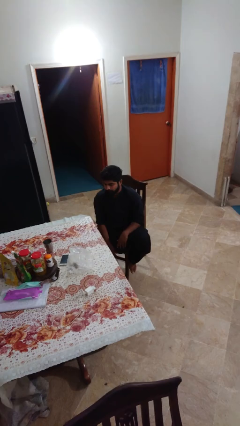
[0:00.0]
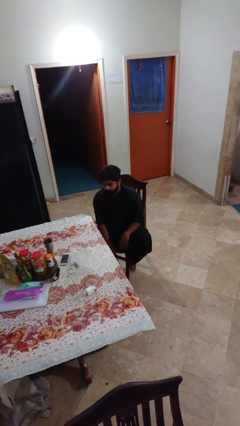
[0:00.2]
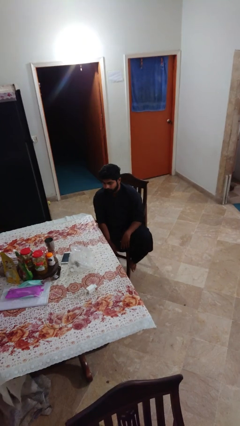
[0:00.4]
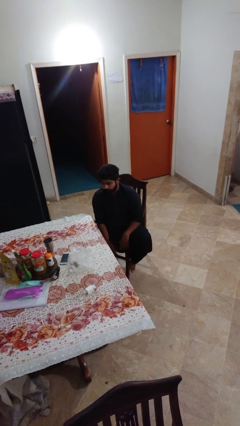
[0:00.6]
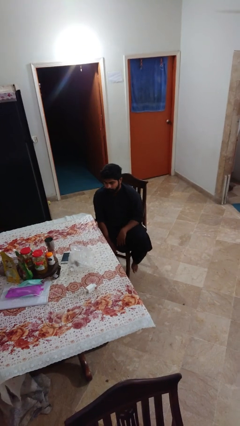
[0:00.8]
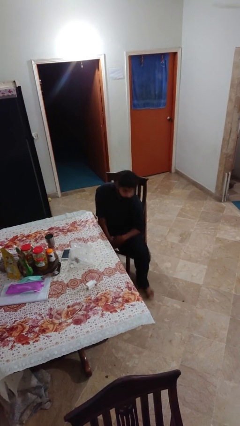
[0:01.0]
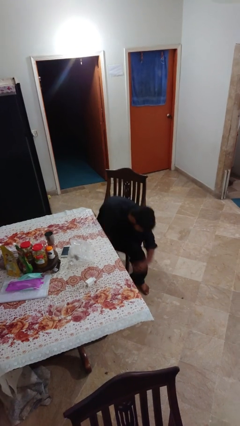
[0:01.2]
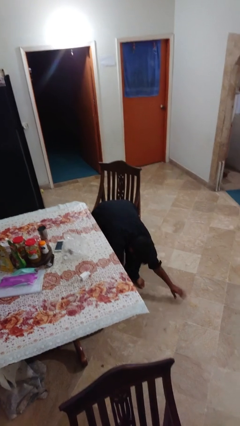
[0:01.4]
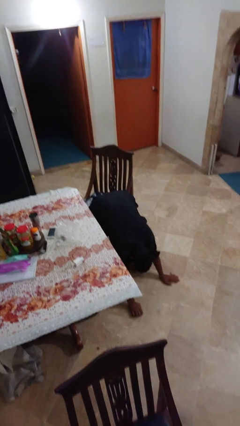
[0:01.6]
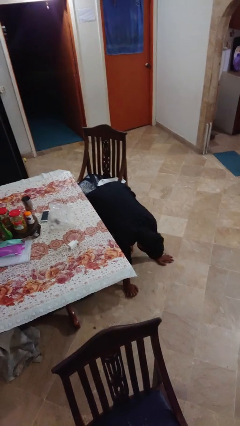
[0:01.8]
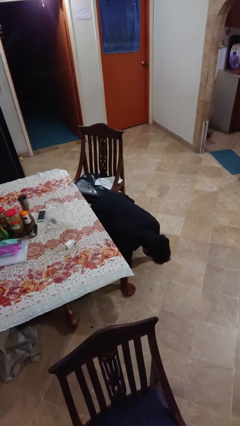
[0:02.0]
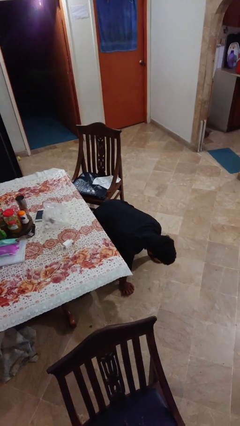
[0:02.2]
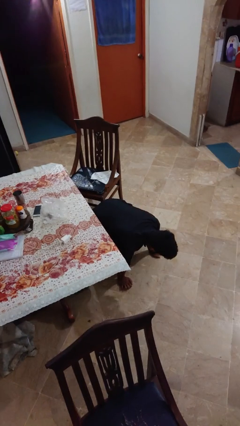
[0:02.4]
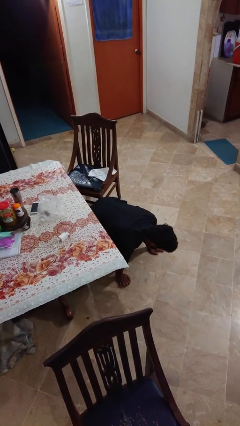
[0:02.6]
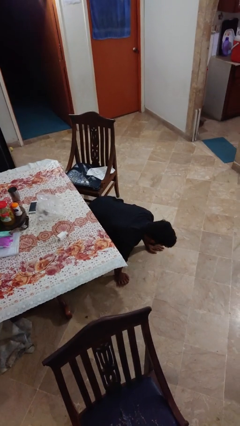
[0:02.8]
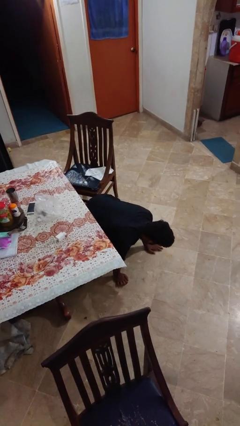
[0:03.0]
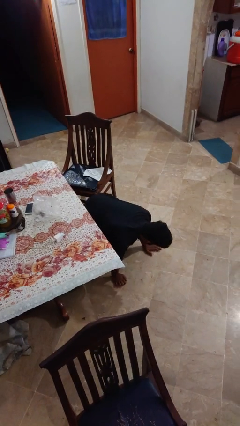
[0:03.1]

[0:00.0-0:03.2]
person falls from chair

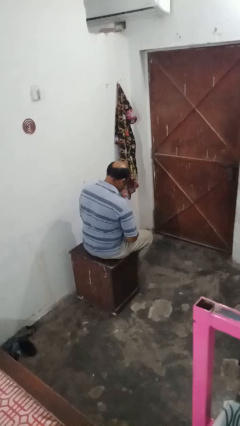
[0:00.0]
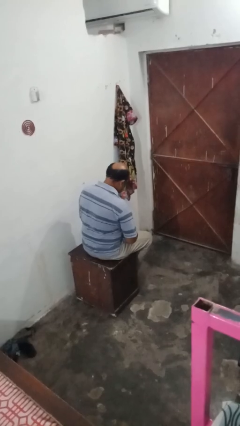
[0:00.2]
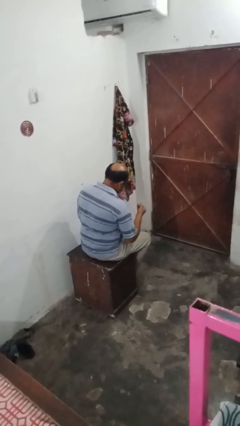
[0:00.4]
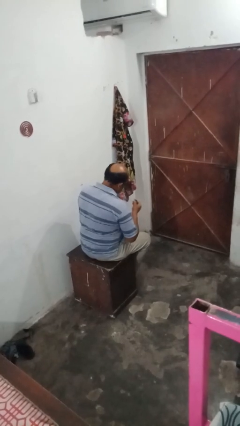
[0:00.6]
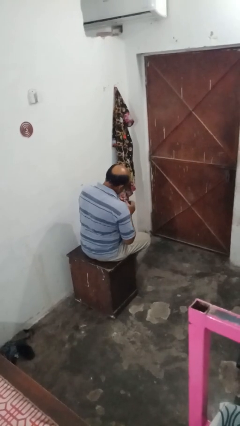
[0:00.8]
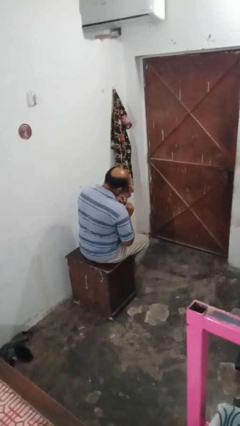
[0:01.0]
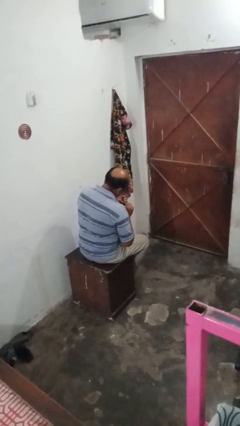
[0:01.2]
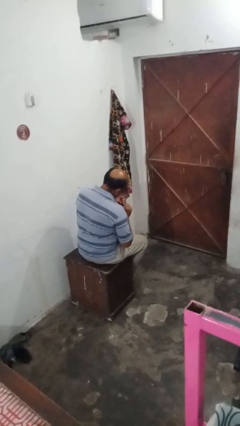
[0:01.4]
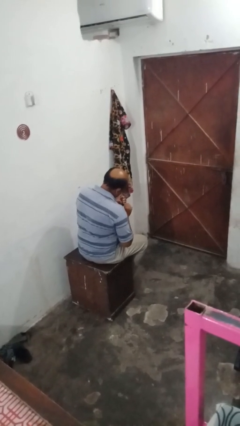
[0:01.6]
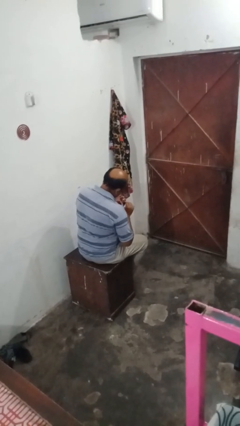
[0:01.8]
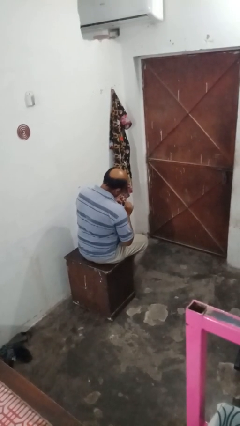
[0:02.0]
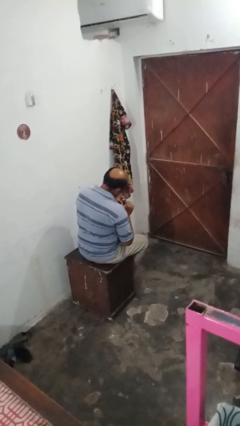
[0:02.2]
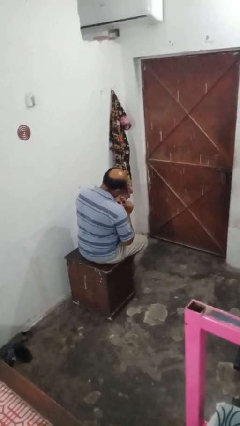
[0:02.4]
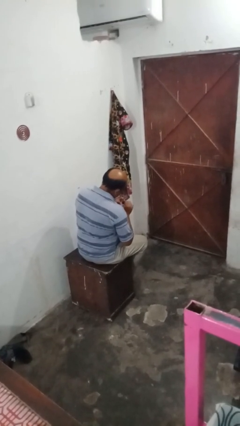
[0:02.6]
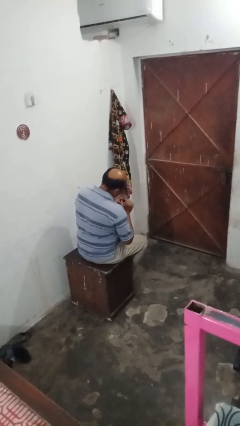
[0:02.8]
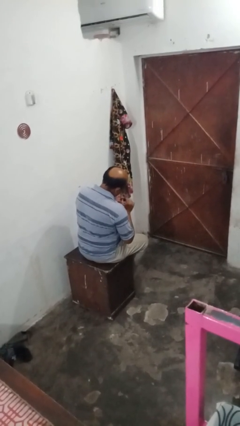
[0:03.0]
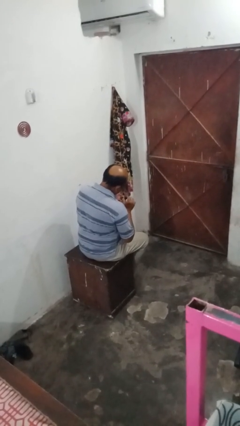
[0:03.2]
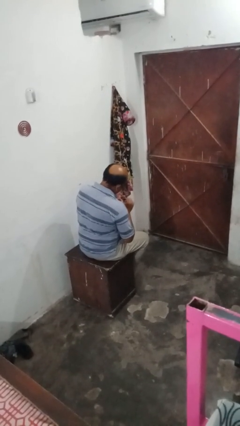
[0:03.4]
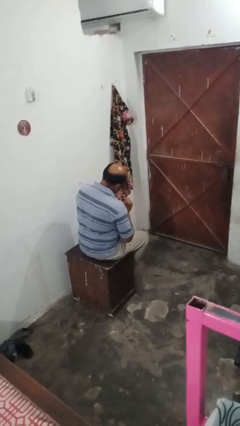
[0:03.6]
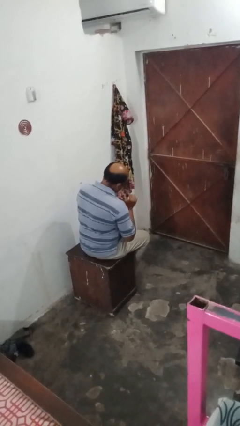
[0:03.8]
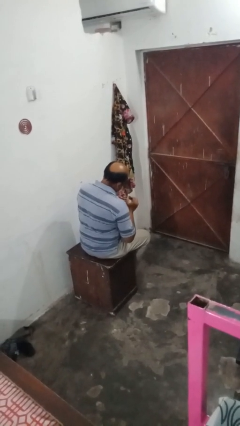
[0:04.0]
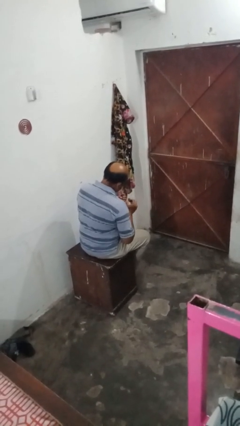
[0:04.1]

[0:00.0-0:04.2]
person paints fingernails

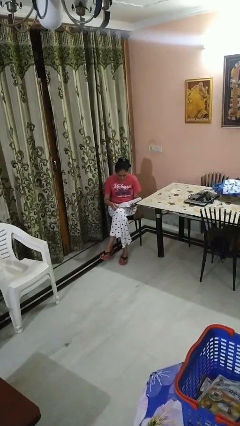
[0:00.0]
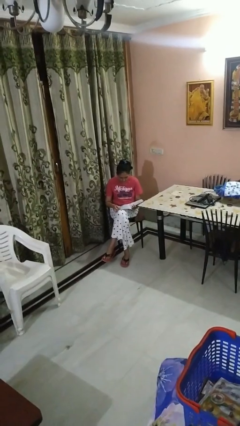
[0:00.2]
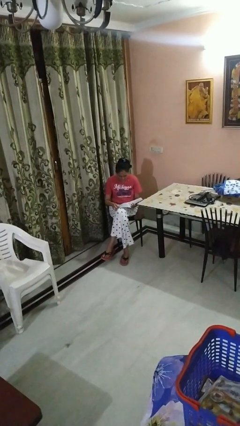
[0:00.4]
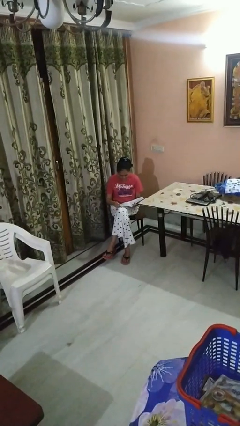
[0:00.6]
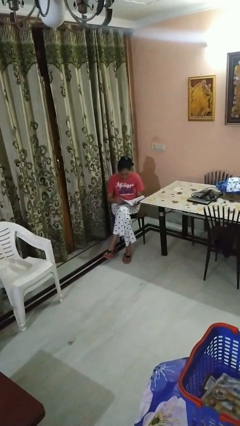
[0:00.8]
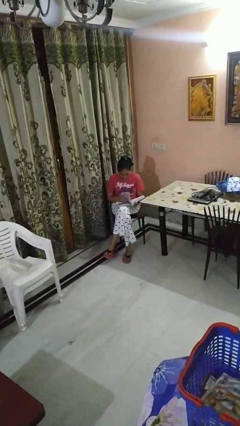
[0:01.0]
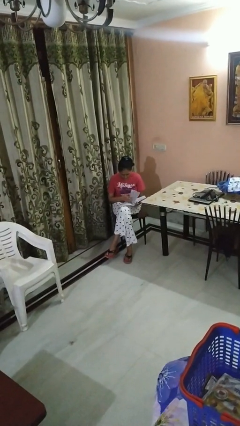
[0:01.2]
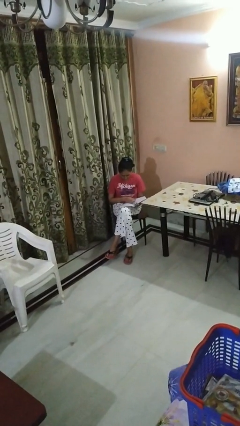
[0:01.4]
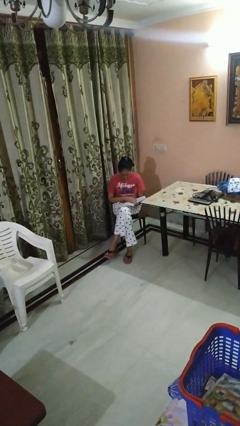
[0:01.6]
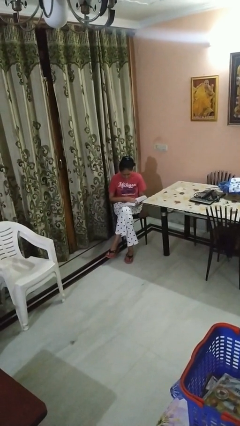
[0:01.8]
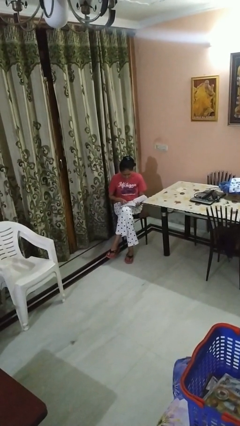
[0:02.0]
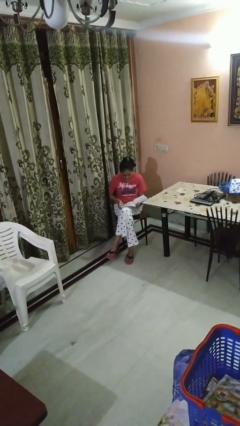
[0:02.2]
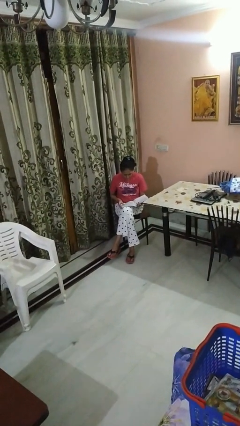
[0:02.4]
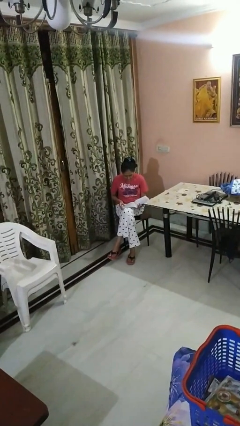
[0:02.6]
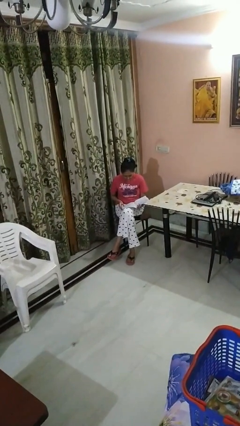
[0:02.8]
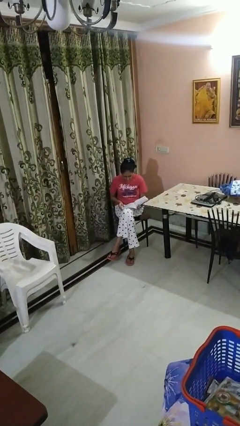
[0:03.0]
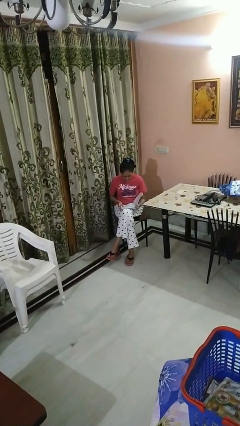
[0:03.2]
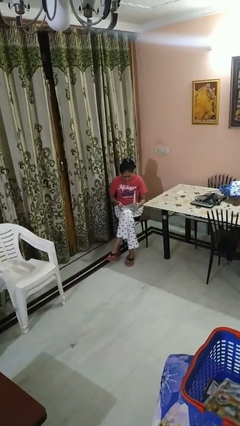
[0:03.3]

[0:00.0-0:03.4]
person reads magazine

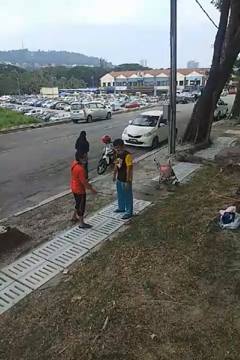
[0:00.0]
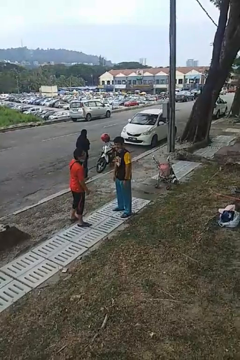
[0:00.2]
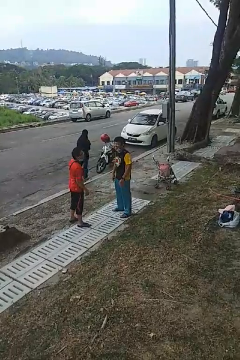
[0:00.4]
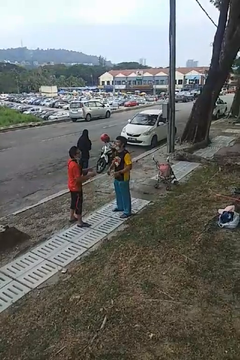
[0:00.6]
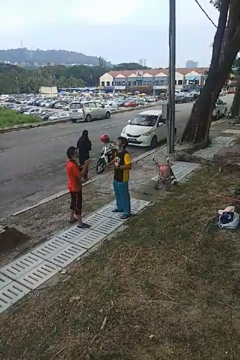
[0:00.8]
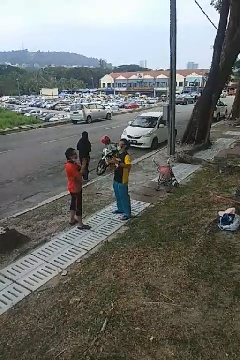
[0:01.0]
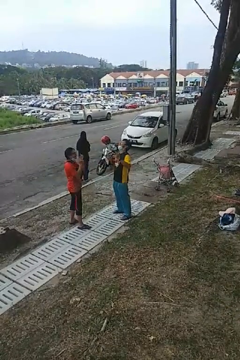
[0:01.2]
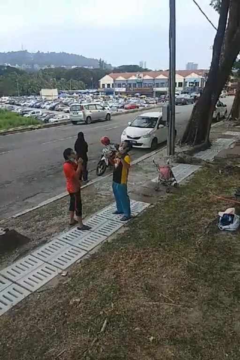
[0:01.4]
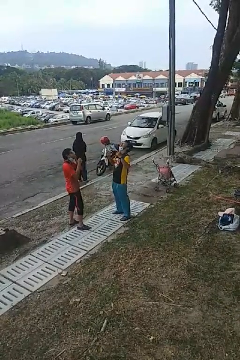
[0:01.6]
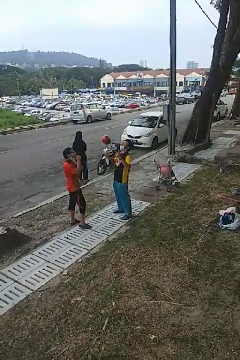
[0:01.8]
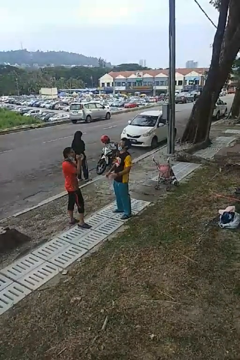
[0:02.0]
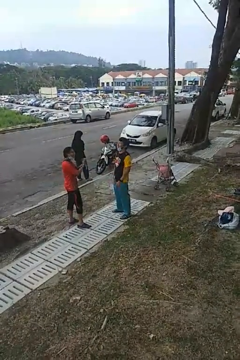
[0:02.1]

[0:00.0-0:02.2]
person laughs with person

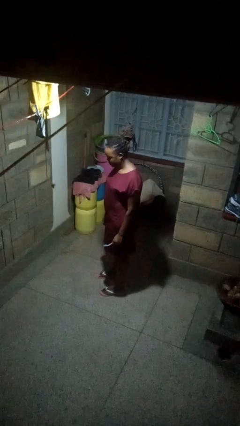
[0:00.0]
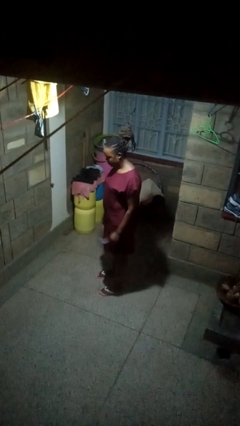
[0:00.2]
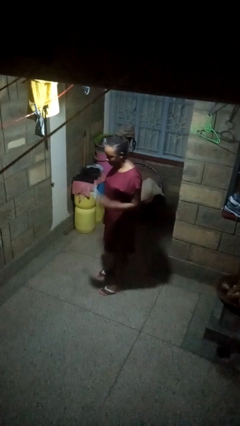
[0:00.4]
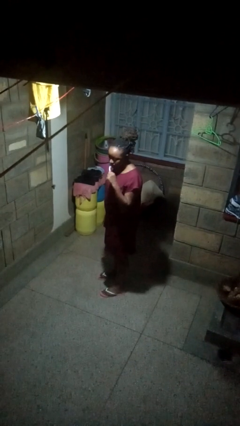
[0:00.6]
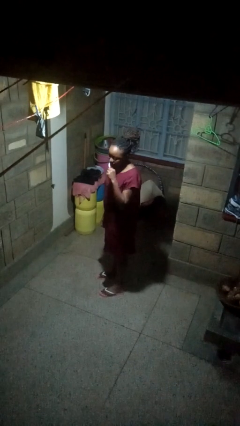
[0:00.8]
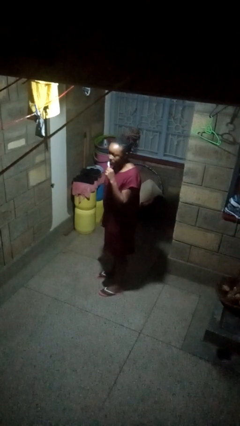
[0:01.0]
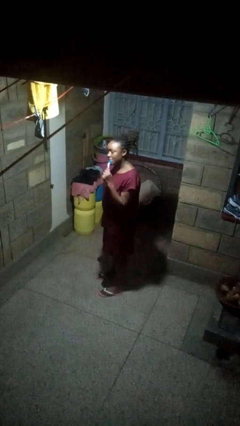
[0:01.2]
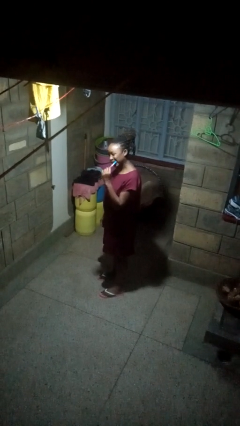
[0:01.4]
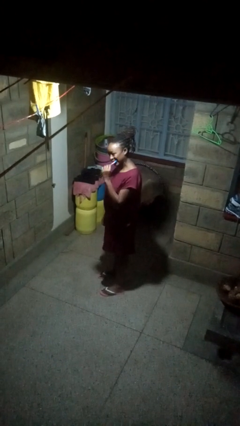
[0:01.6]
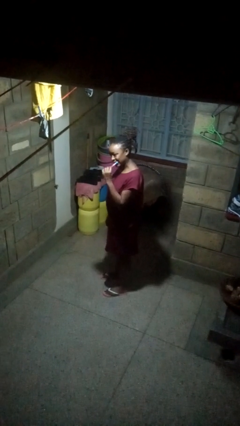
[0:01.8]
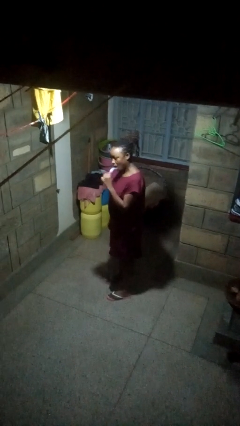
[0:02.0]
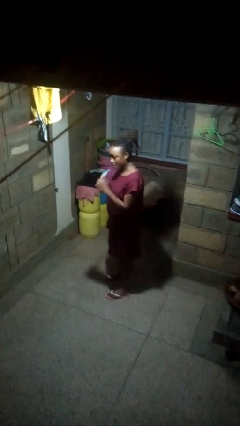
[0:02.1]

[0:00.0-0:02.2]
person brushes teeth

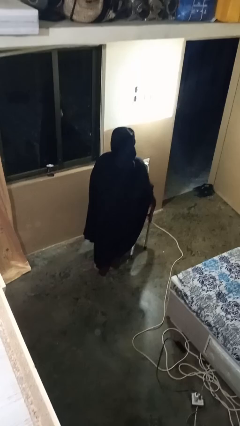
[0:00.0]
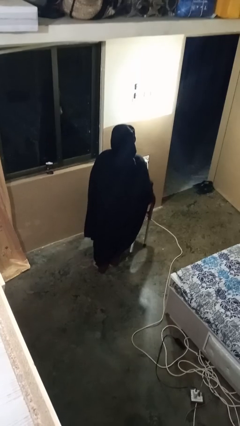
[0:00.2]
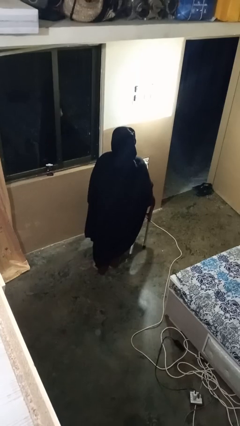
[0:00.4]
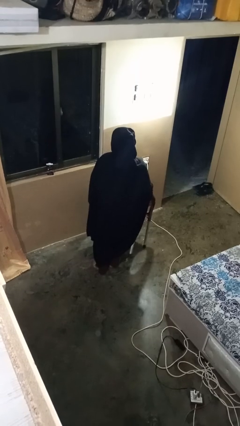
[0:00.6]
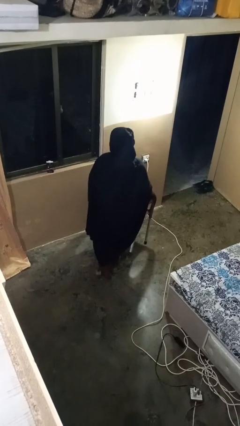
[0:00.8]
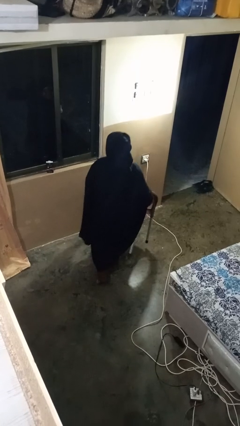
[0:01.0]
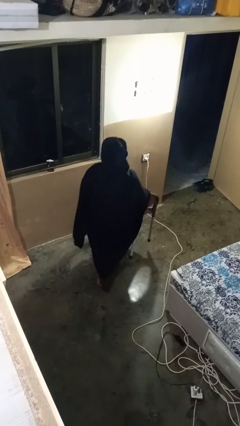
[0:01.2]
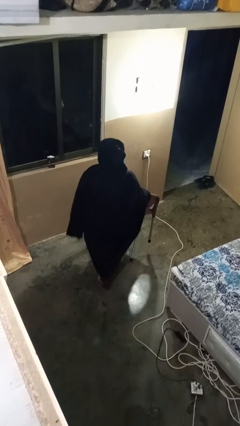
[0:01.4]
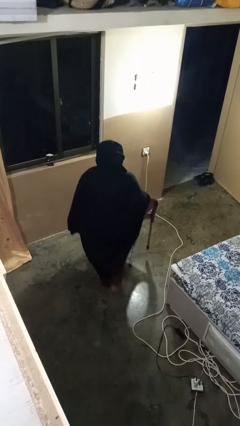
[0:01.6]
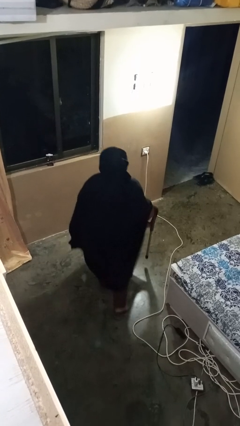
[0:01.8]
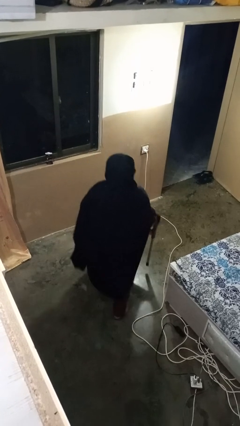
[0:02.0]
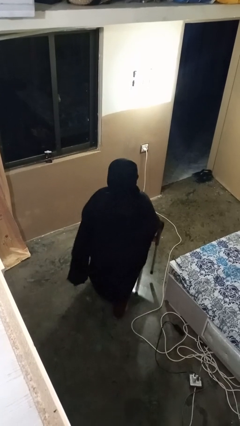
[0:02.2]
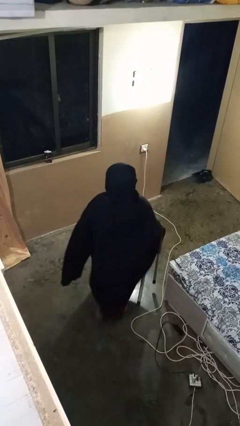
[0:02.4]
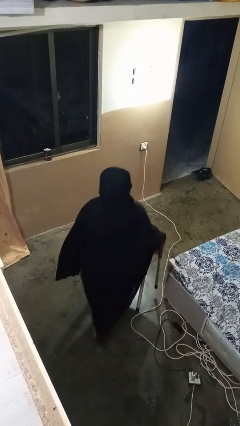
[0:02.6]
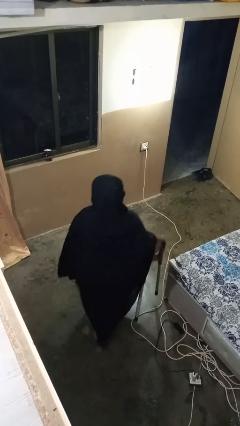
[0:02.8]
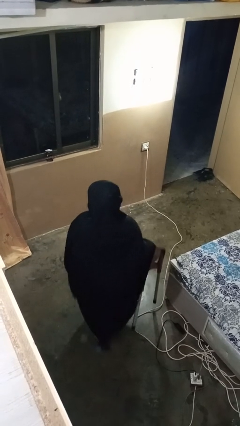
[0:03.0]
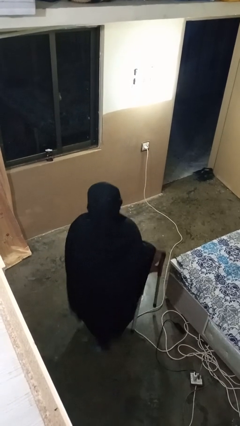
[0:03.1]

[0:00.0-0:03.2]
person carries furniture
